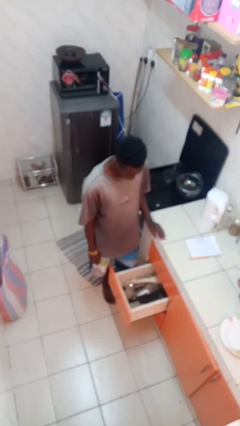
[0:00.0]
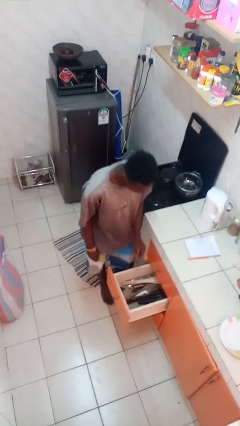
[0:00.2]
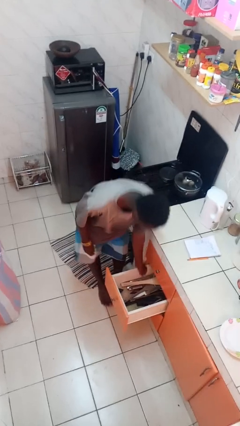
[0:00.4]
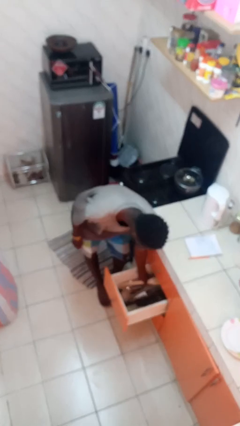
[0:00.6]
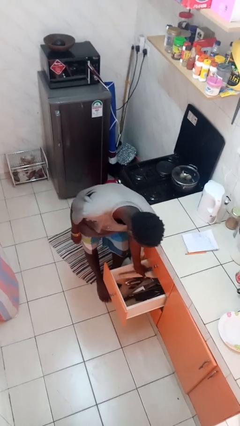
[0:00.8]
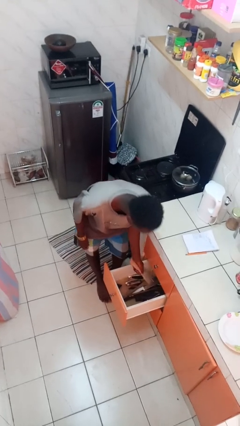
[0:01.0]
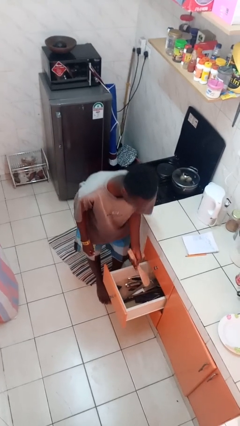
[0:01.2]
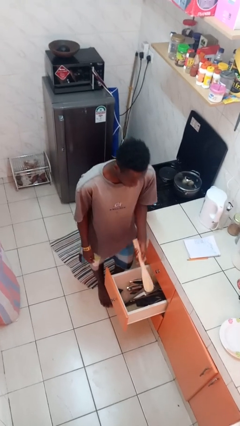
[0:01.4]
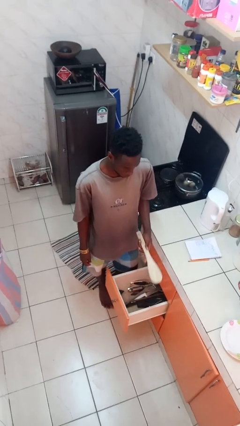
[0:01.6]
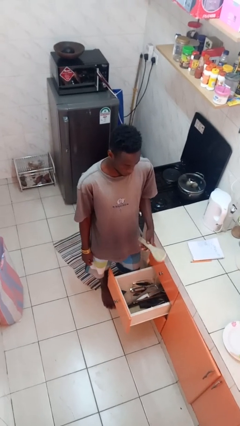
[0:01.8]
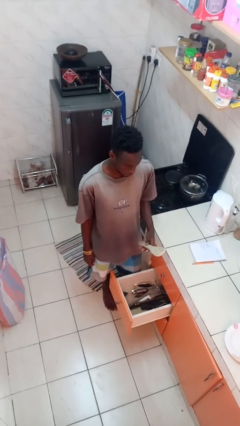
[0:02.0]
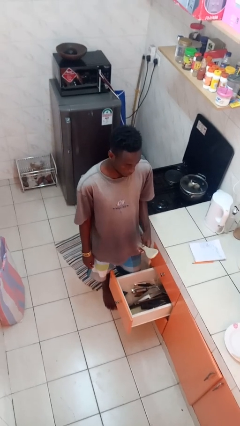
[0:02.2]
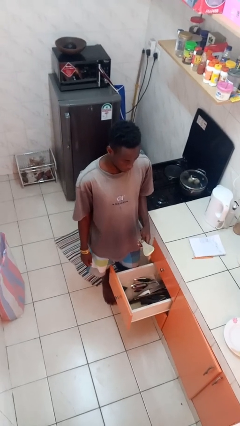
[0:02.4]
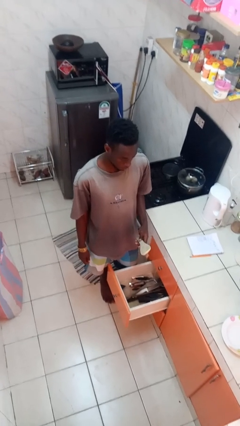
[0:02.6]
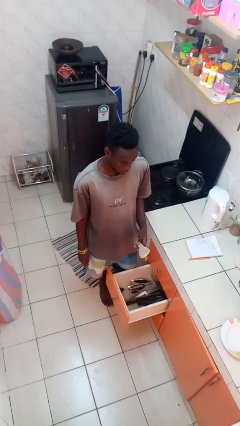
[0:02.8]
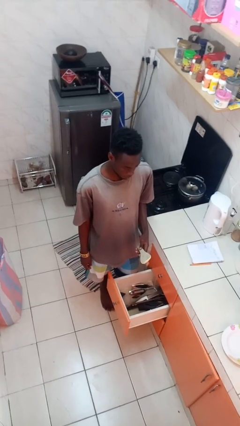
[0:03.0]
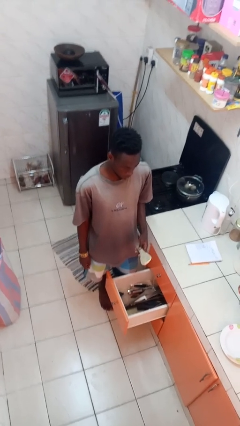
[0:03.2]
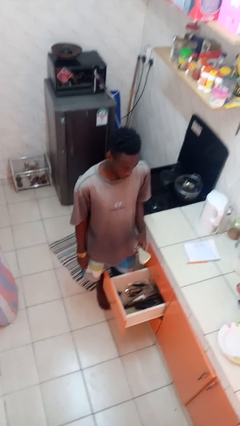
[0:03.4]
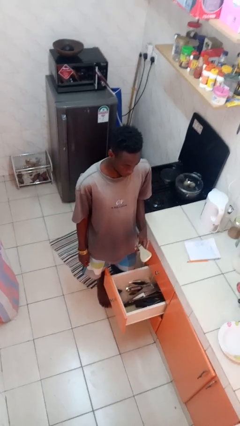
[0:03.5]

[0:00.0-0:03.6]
person takes object from kitchen drawer

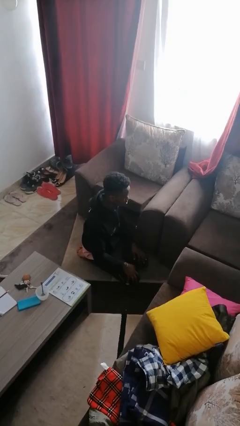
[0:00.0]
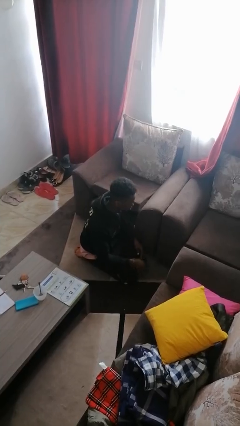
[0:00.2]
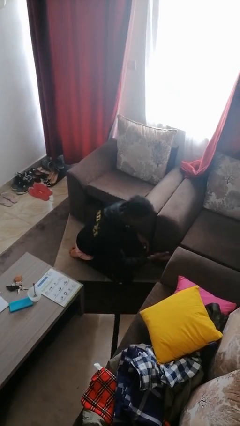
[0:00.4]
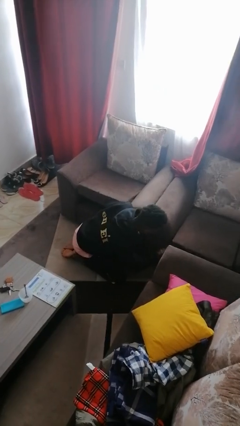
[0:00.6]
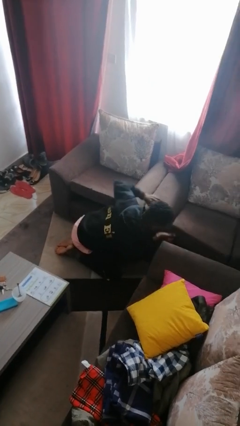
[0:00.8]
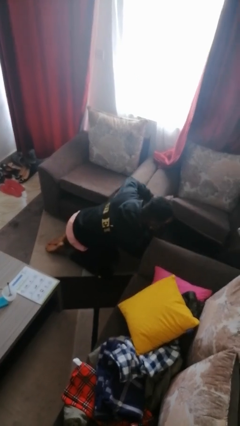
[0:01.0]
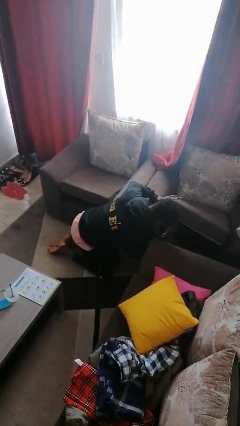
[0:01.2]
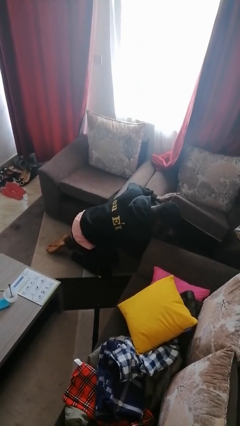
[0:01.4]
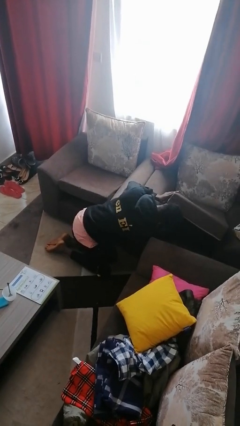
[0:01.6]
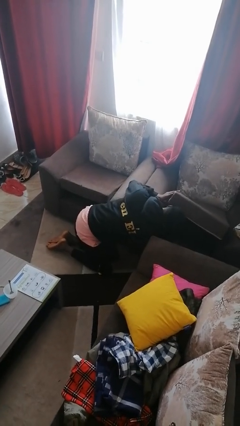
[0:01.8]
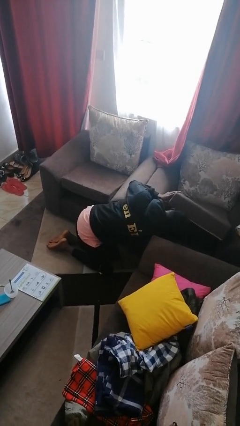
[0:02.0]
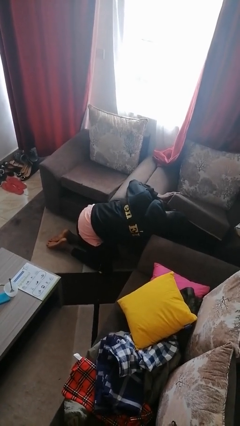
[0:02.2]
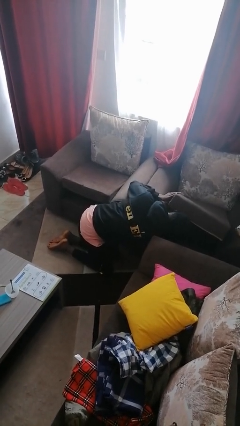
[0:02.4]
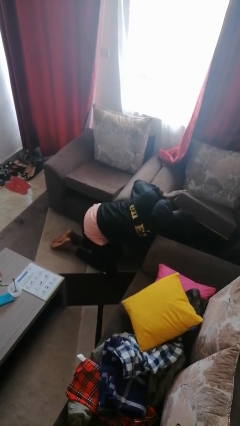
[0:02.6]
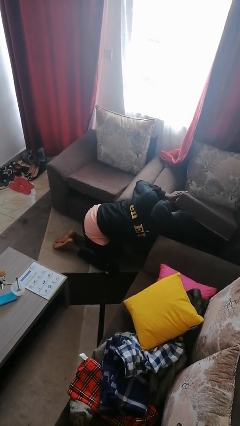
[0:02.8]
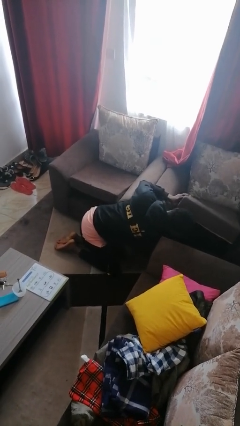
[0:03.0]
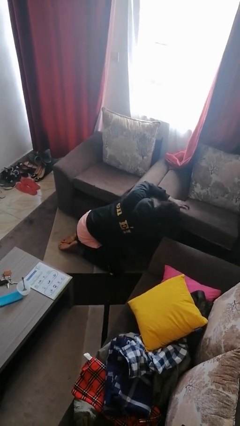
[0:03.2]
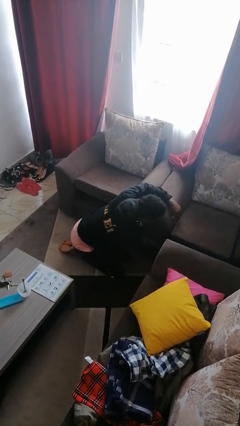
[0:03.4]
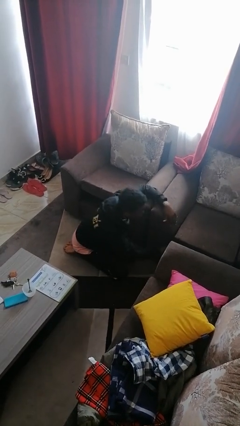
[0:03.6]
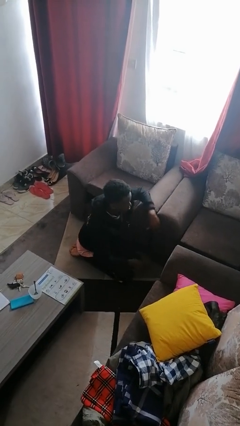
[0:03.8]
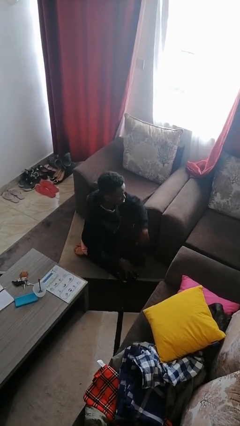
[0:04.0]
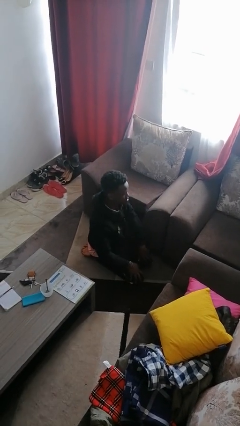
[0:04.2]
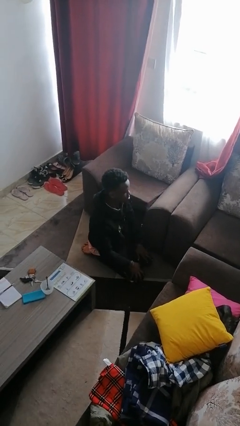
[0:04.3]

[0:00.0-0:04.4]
person searches in couch

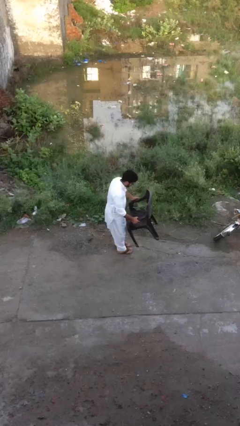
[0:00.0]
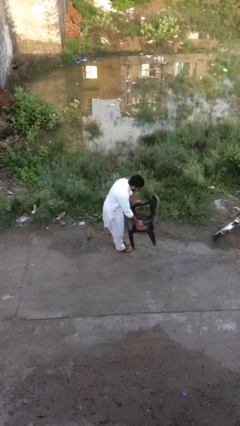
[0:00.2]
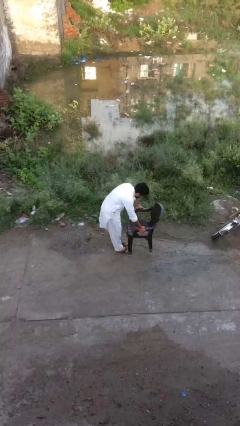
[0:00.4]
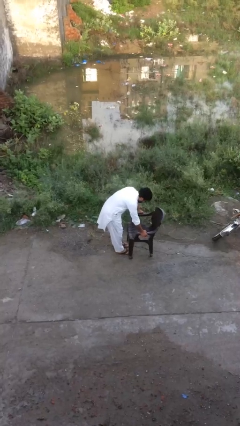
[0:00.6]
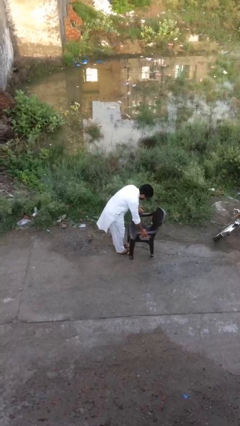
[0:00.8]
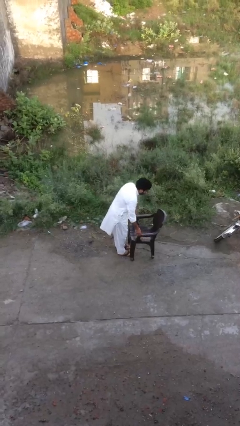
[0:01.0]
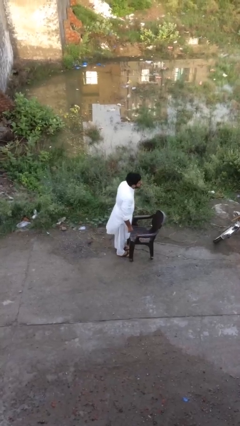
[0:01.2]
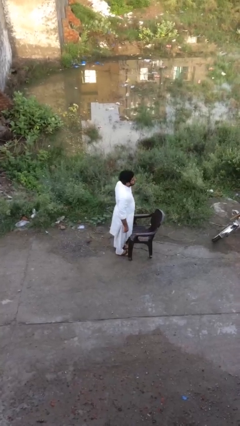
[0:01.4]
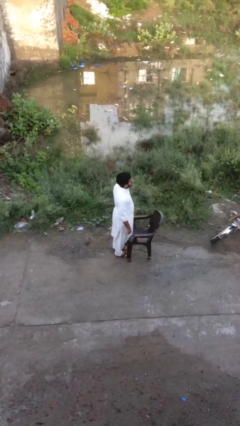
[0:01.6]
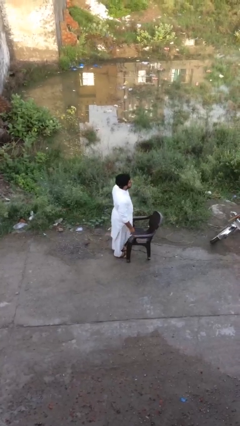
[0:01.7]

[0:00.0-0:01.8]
person puts down object on floor

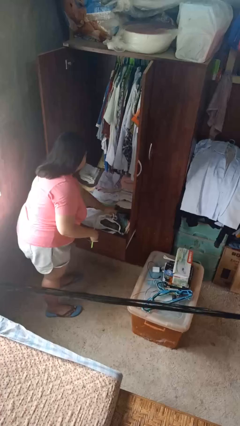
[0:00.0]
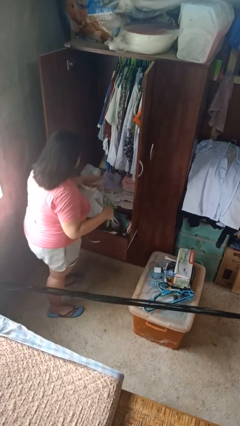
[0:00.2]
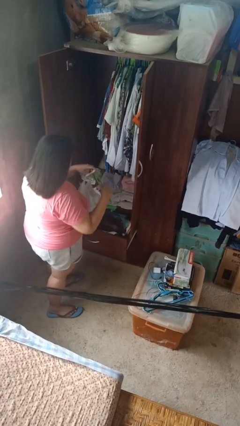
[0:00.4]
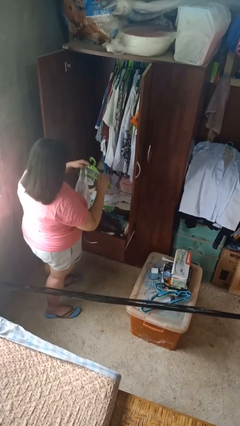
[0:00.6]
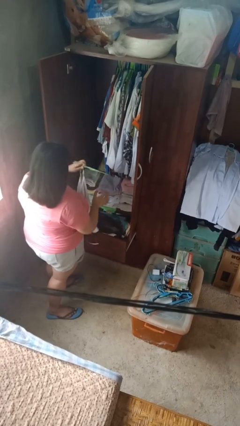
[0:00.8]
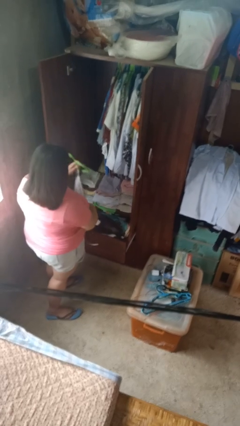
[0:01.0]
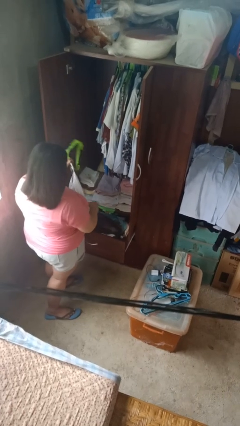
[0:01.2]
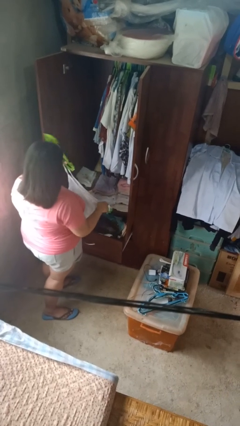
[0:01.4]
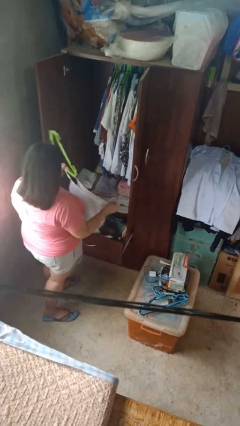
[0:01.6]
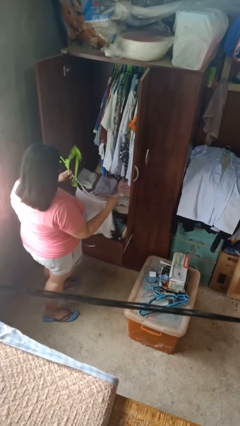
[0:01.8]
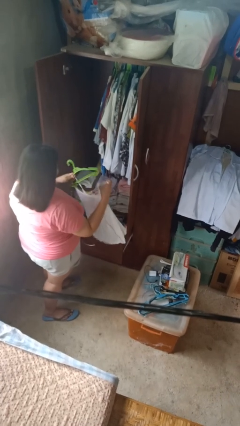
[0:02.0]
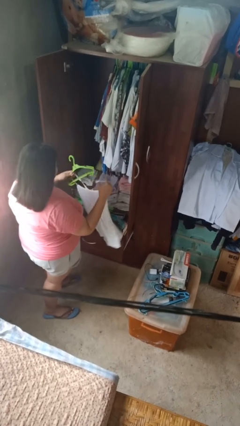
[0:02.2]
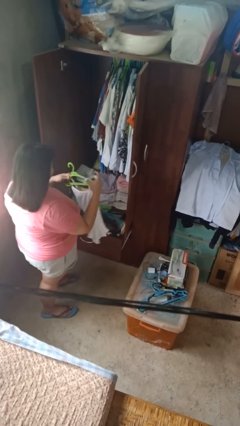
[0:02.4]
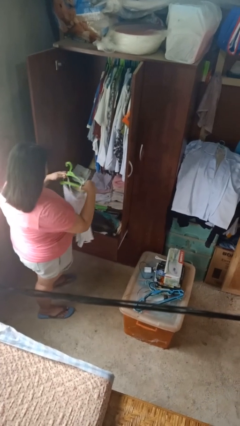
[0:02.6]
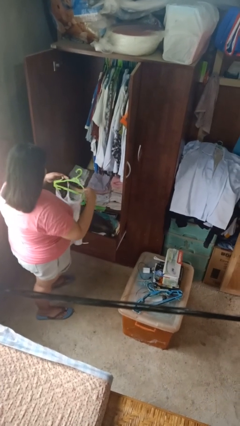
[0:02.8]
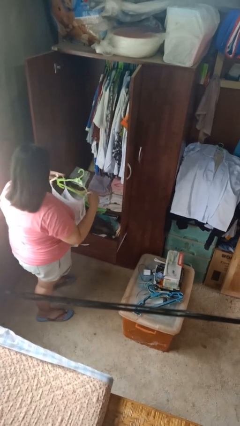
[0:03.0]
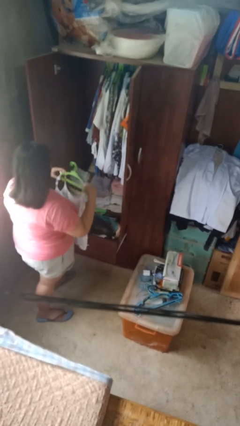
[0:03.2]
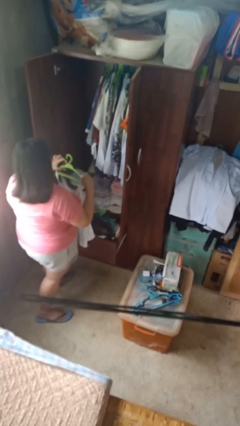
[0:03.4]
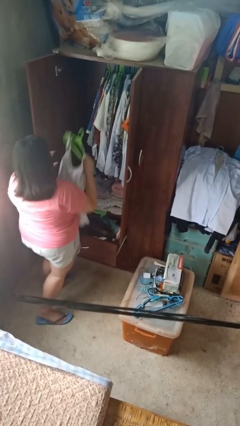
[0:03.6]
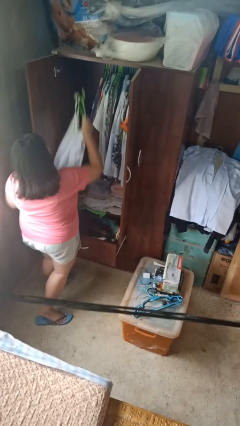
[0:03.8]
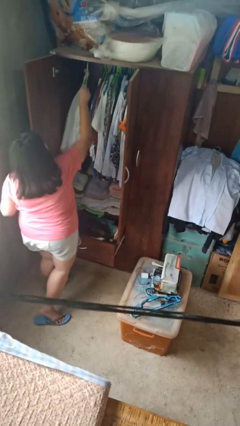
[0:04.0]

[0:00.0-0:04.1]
person puts clothes into closet

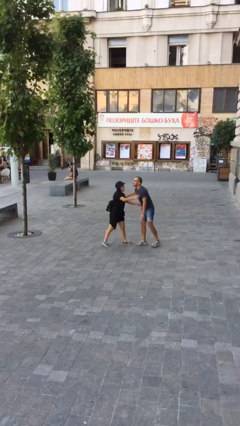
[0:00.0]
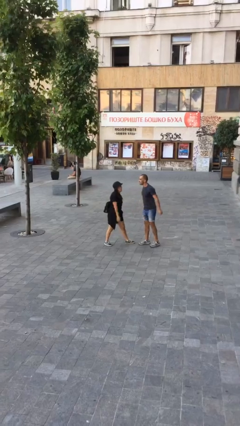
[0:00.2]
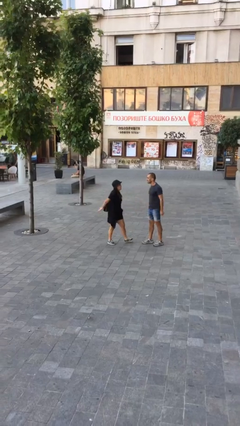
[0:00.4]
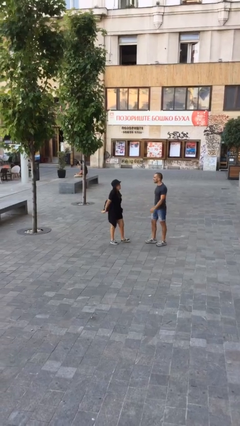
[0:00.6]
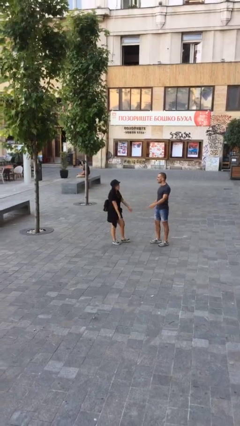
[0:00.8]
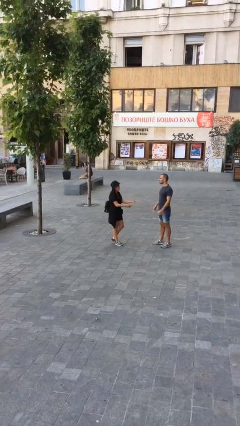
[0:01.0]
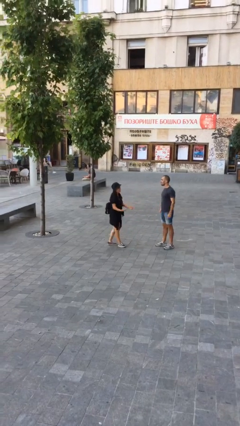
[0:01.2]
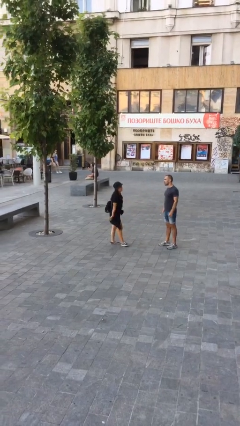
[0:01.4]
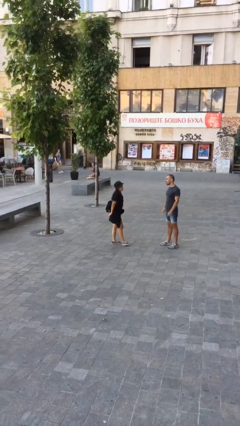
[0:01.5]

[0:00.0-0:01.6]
person talks to person

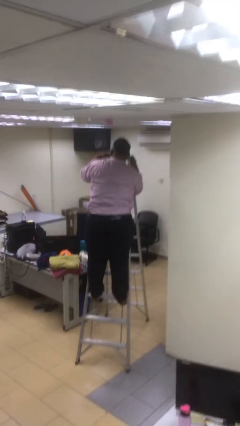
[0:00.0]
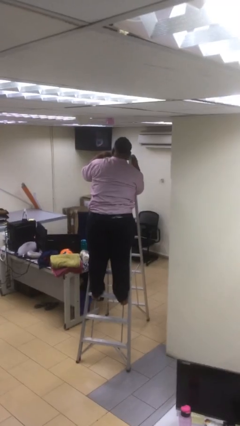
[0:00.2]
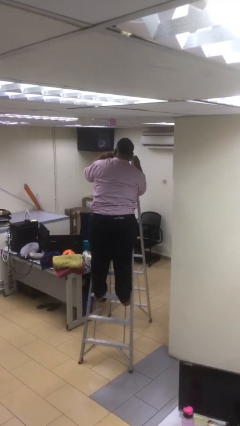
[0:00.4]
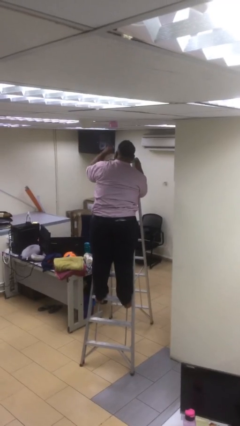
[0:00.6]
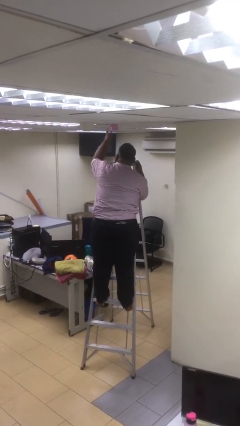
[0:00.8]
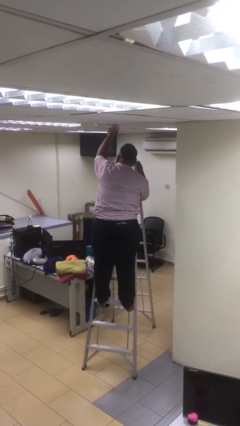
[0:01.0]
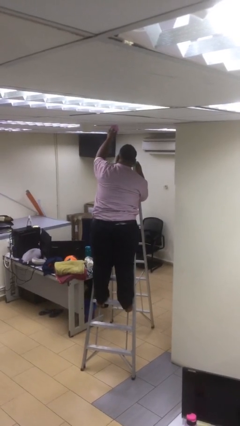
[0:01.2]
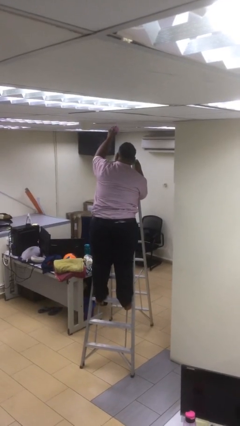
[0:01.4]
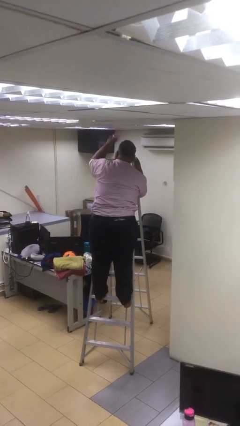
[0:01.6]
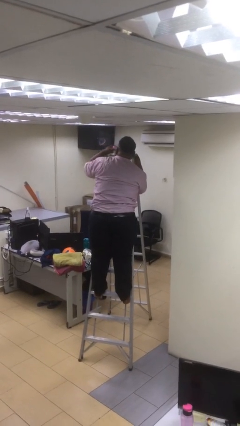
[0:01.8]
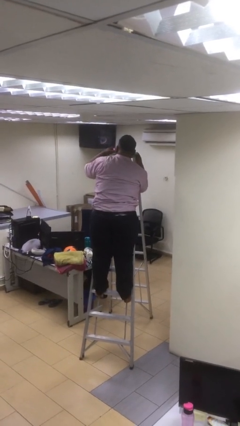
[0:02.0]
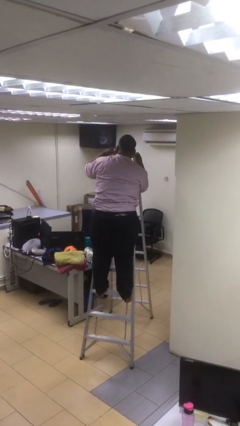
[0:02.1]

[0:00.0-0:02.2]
person takes down smoke detector
